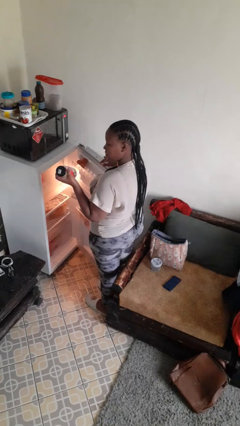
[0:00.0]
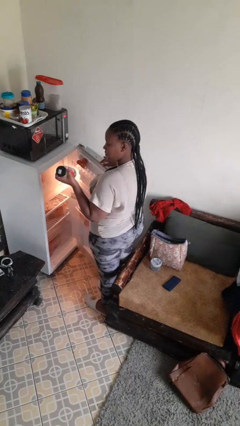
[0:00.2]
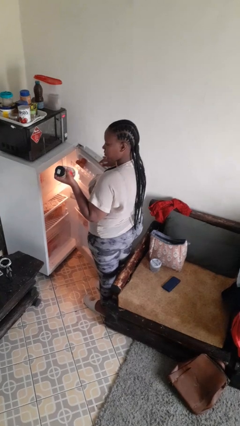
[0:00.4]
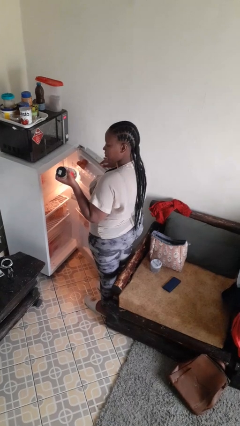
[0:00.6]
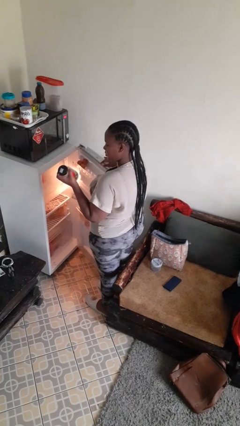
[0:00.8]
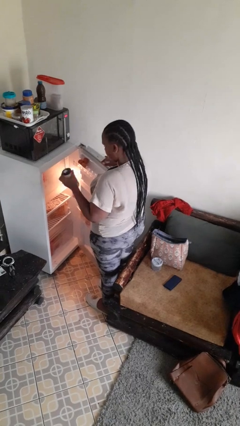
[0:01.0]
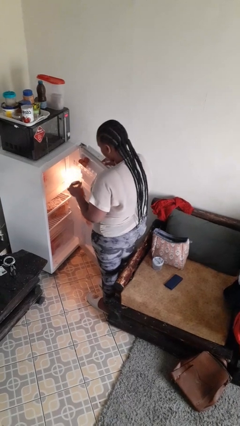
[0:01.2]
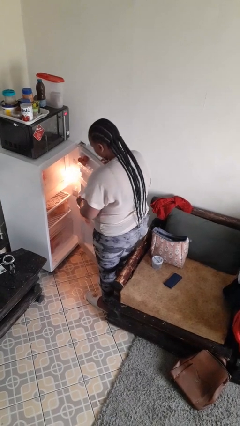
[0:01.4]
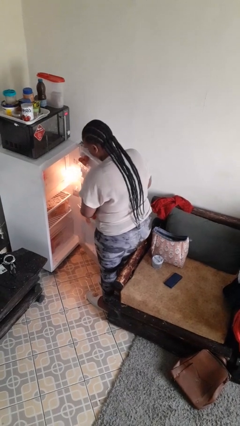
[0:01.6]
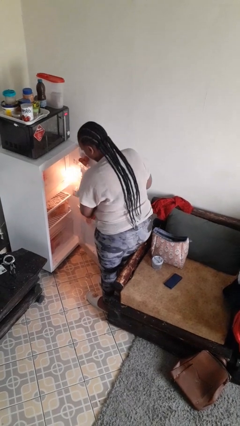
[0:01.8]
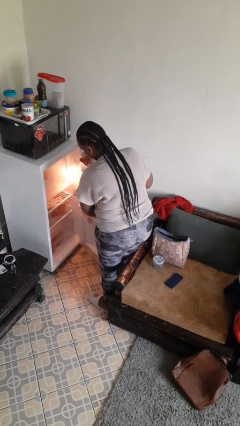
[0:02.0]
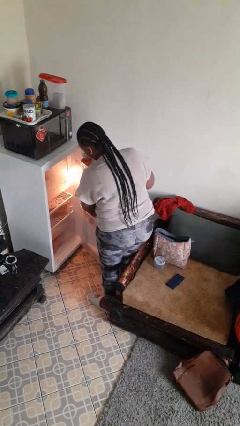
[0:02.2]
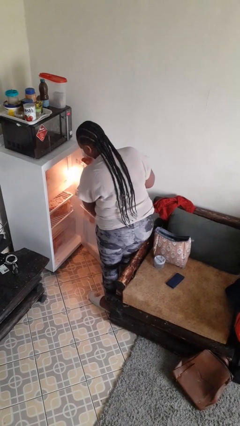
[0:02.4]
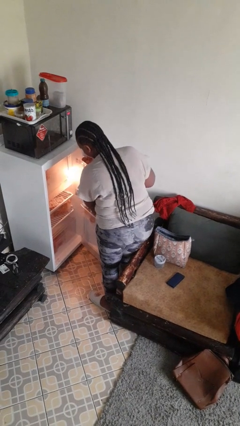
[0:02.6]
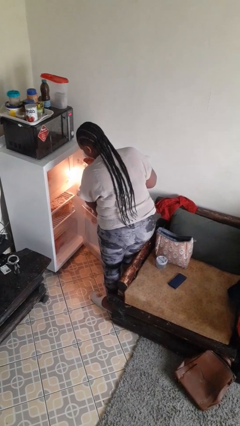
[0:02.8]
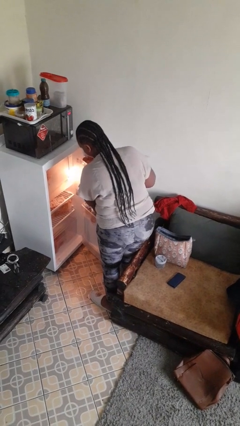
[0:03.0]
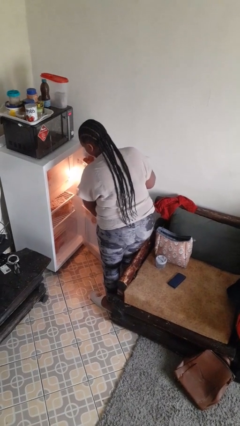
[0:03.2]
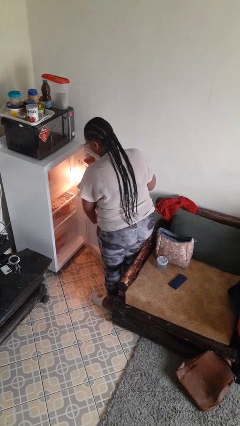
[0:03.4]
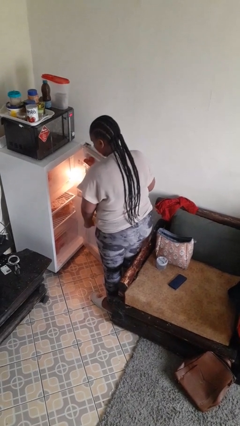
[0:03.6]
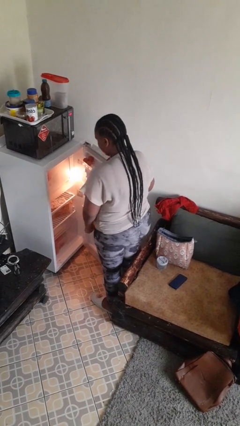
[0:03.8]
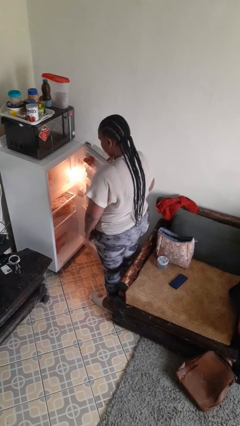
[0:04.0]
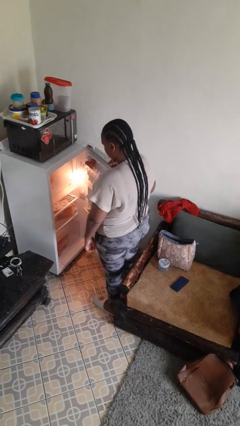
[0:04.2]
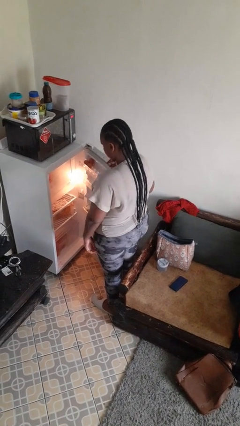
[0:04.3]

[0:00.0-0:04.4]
person puts object into refrigerator

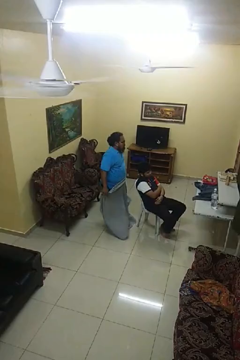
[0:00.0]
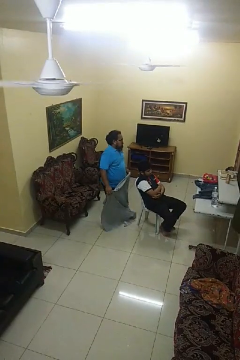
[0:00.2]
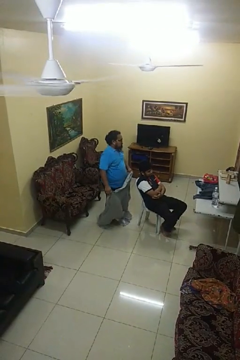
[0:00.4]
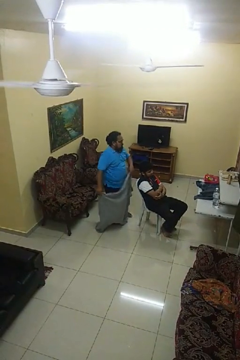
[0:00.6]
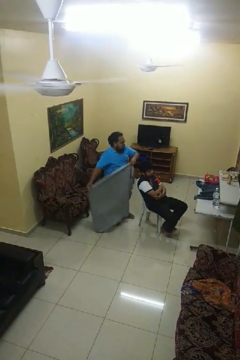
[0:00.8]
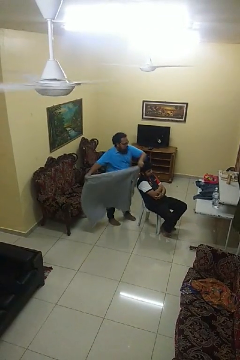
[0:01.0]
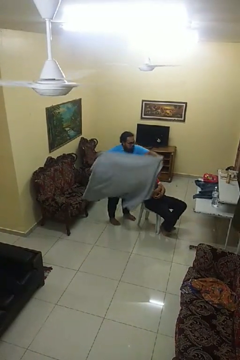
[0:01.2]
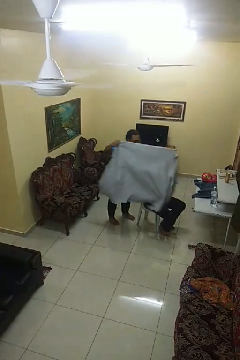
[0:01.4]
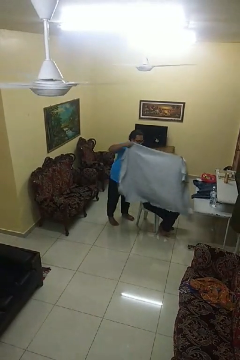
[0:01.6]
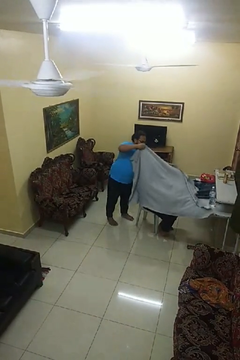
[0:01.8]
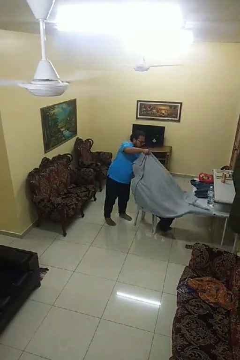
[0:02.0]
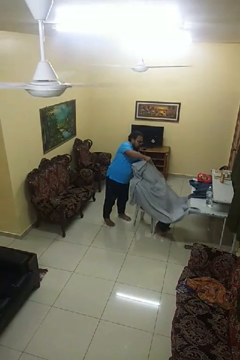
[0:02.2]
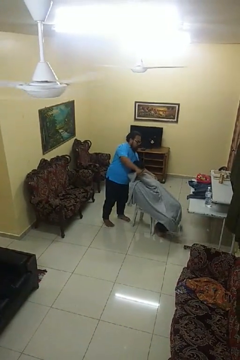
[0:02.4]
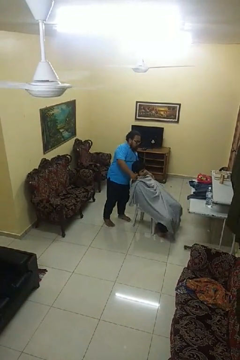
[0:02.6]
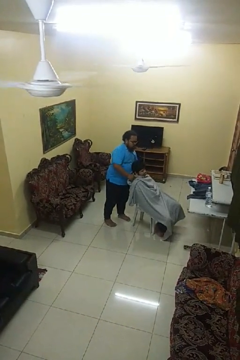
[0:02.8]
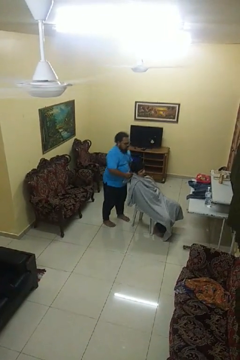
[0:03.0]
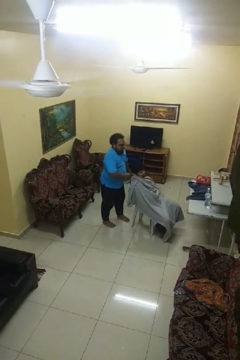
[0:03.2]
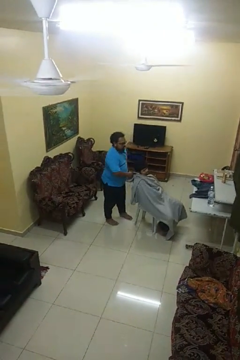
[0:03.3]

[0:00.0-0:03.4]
person covers friend with blanket

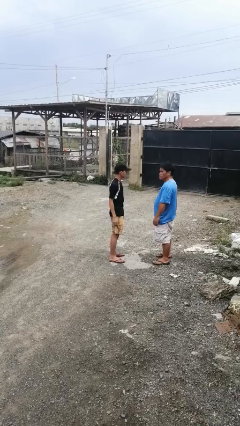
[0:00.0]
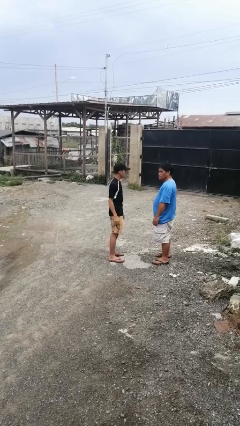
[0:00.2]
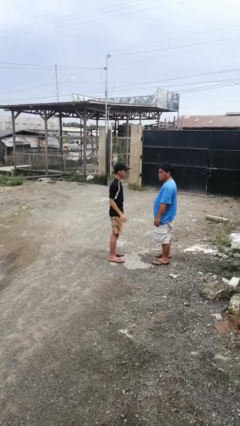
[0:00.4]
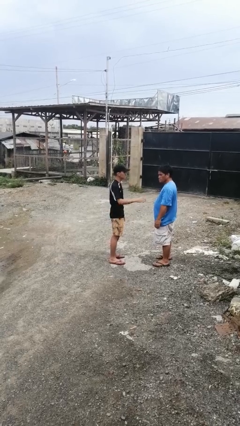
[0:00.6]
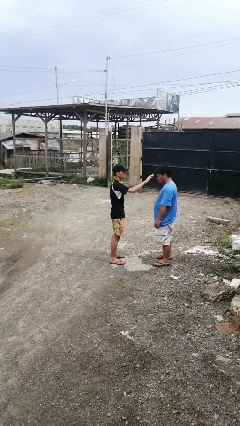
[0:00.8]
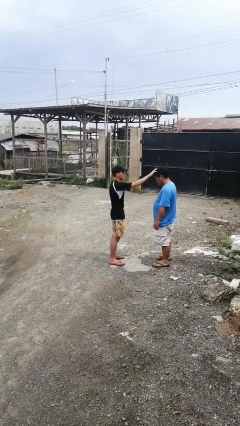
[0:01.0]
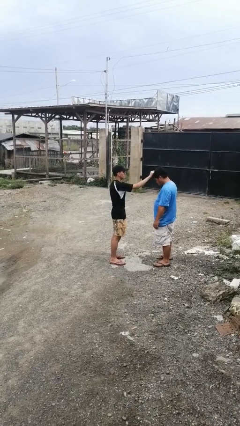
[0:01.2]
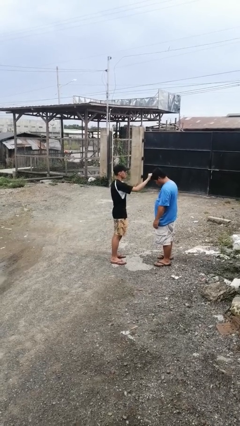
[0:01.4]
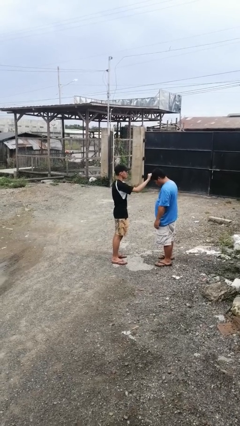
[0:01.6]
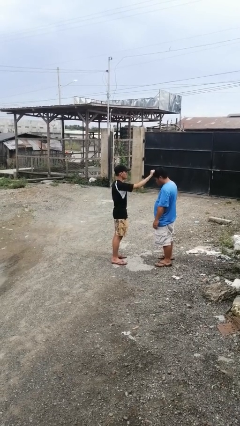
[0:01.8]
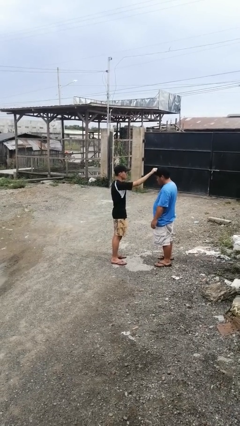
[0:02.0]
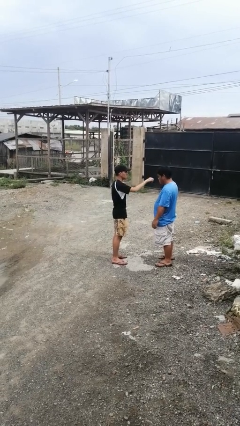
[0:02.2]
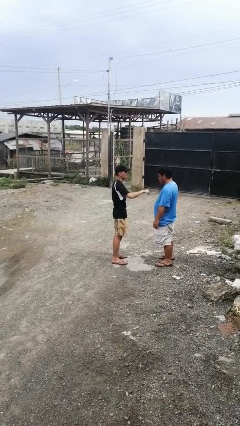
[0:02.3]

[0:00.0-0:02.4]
person grabs person by hair

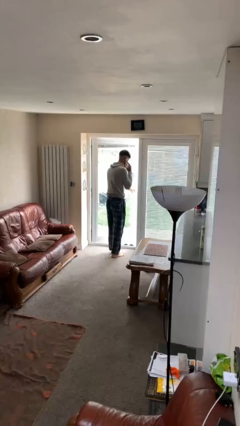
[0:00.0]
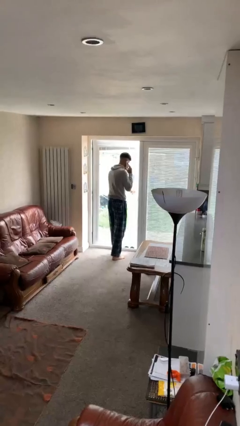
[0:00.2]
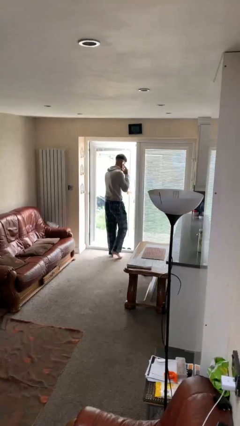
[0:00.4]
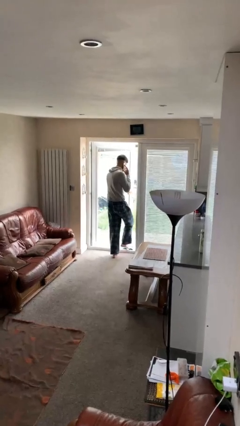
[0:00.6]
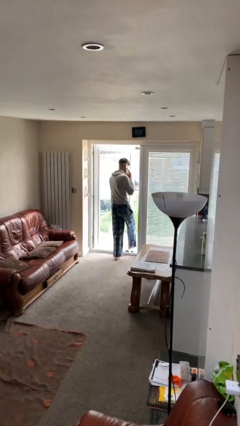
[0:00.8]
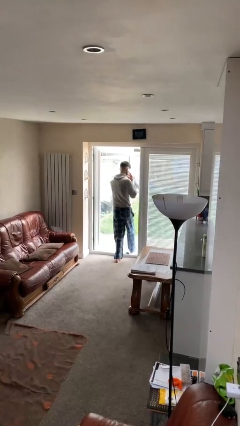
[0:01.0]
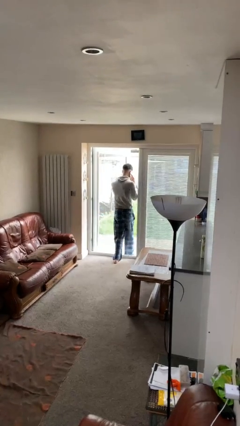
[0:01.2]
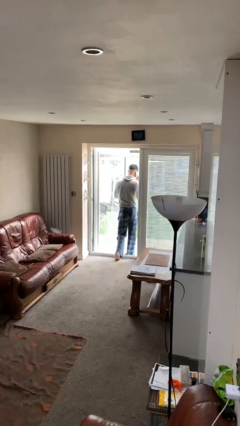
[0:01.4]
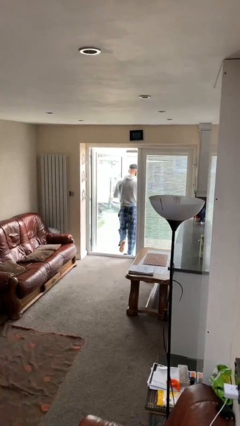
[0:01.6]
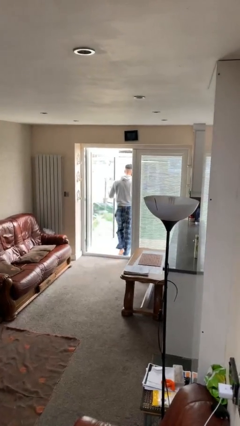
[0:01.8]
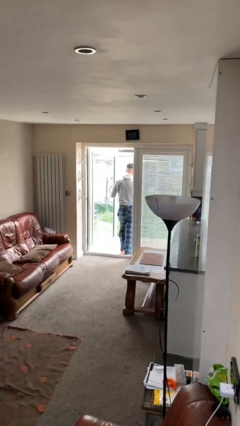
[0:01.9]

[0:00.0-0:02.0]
person exits scene through structure

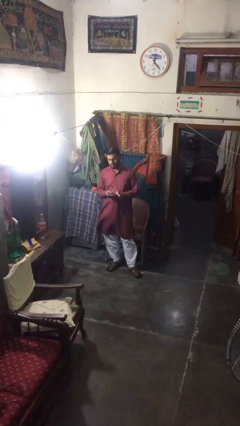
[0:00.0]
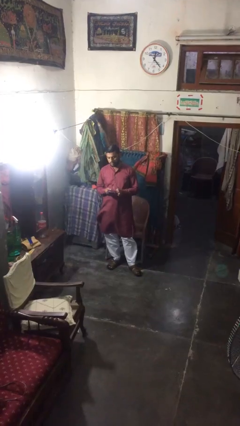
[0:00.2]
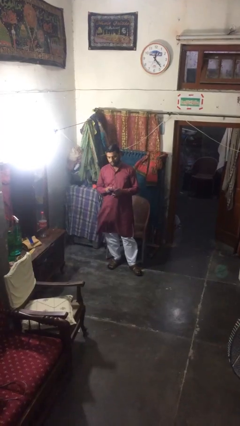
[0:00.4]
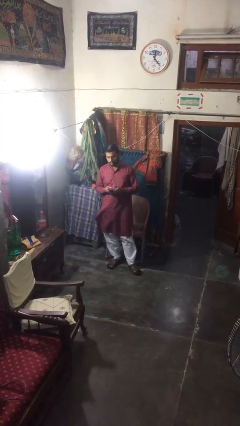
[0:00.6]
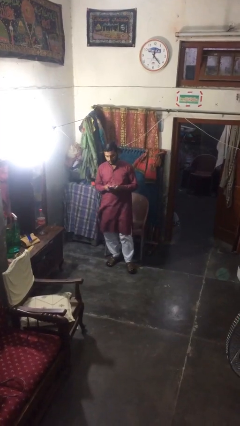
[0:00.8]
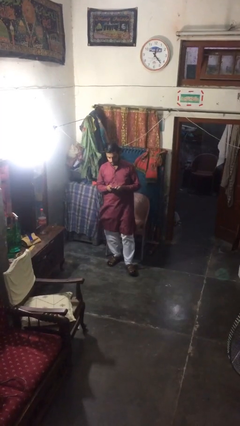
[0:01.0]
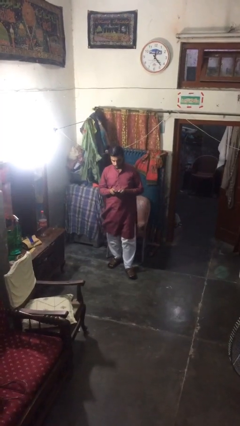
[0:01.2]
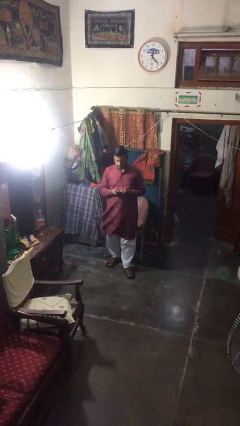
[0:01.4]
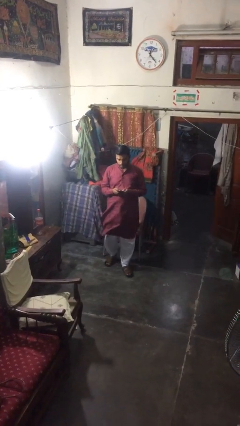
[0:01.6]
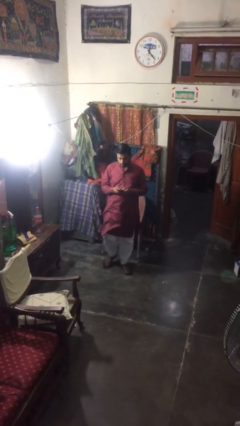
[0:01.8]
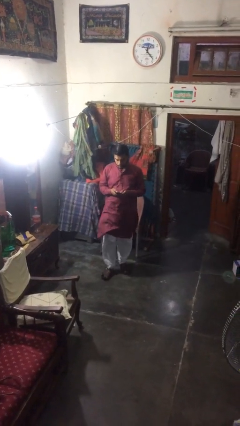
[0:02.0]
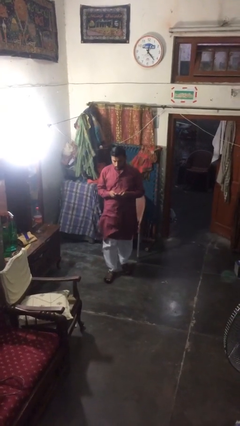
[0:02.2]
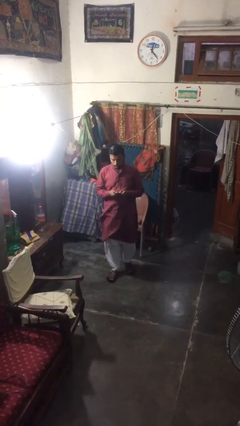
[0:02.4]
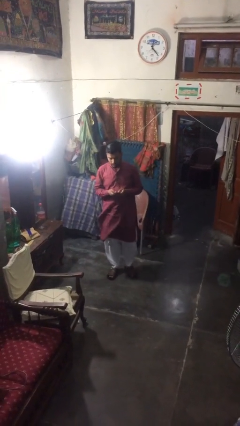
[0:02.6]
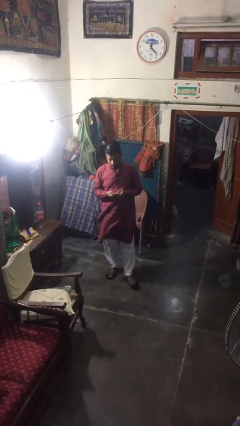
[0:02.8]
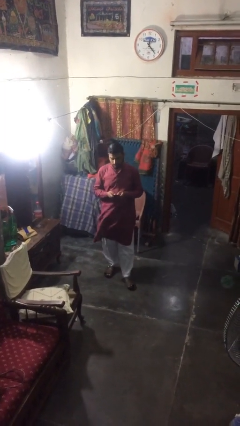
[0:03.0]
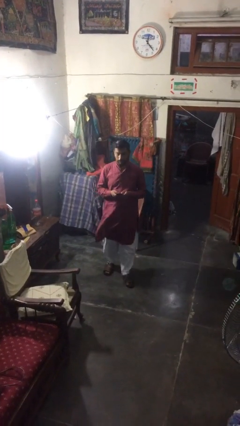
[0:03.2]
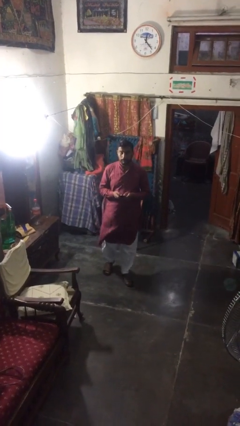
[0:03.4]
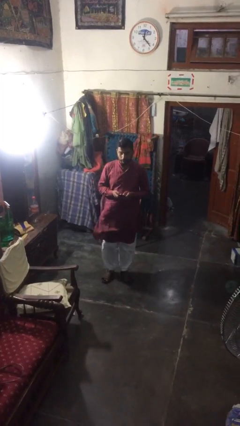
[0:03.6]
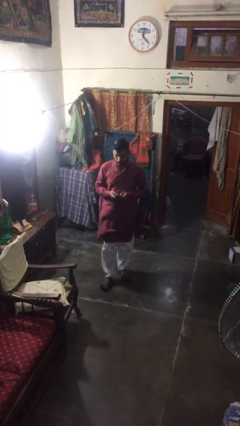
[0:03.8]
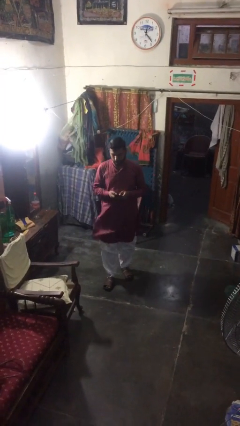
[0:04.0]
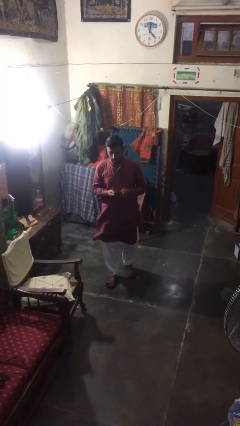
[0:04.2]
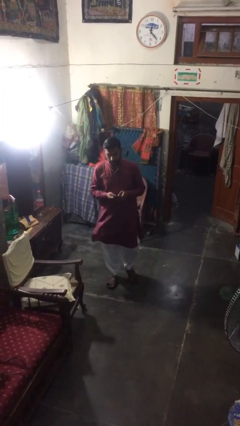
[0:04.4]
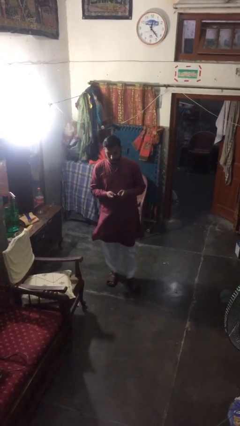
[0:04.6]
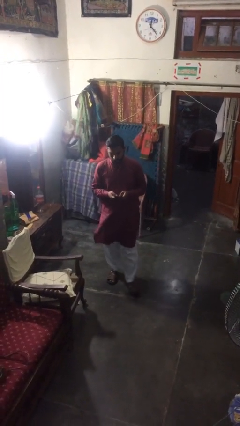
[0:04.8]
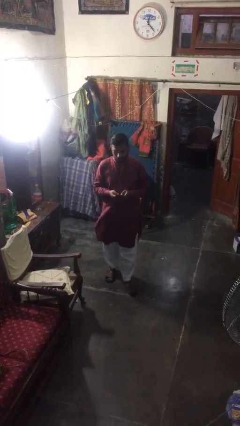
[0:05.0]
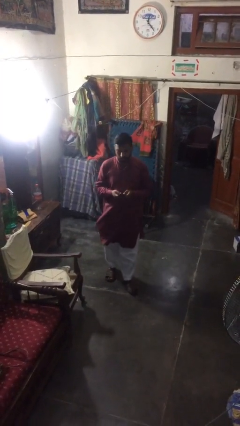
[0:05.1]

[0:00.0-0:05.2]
person texts on phone

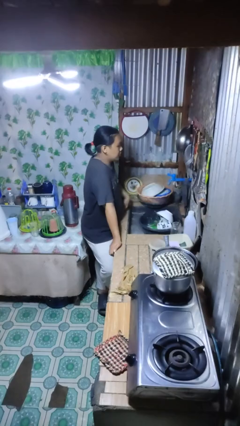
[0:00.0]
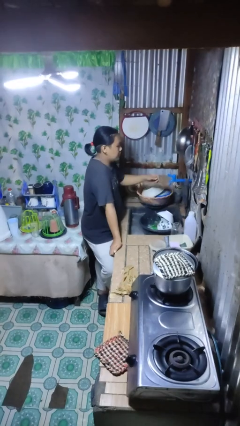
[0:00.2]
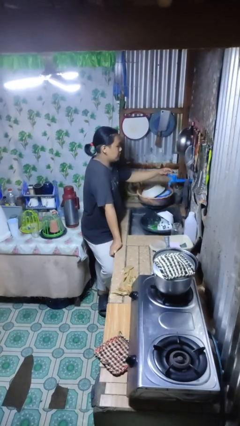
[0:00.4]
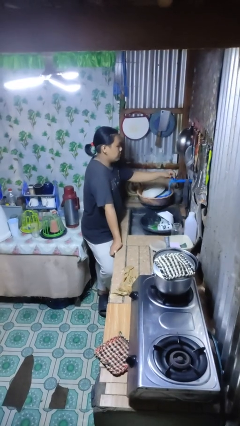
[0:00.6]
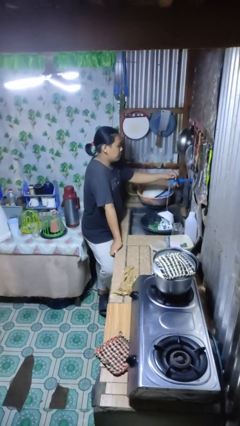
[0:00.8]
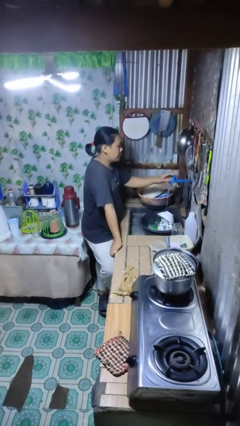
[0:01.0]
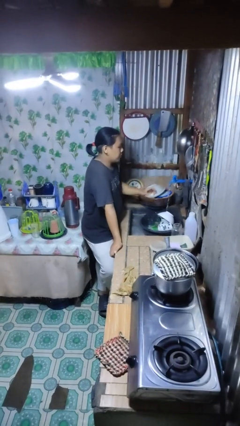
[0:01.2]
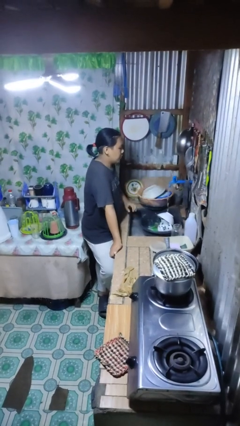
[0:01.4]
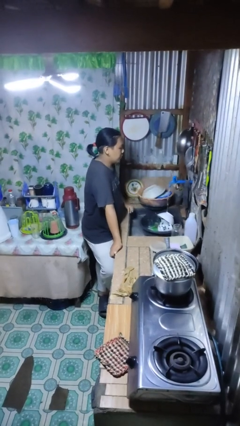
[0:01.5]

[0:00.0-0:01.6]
person turns on faucet
